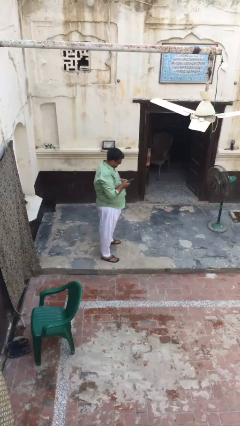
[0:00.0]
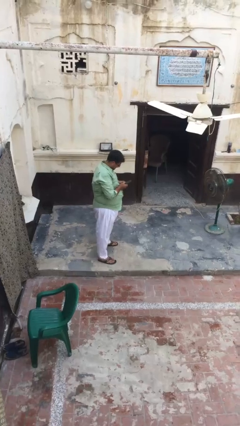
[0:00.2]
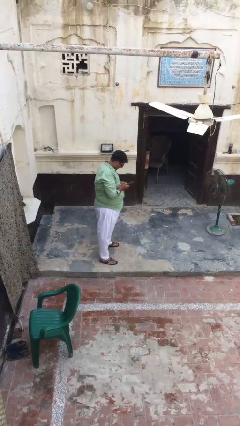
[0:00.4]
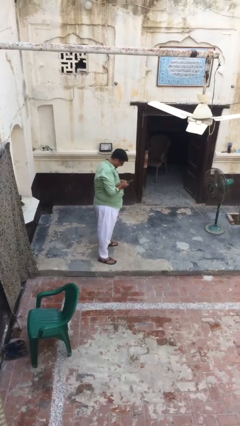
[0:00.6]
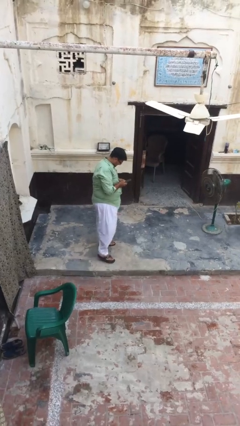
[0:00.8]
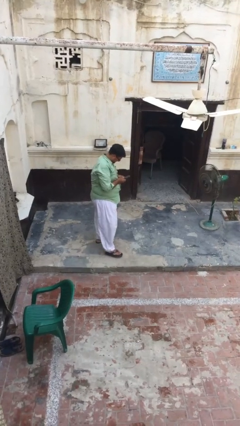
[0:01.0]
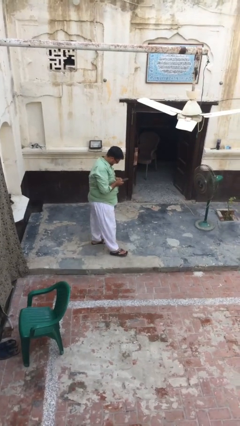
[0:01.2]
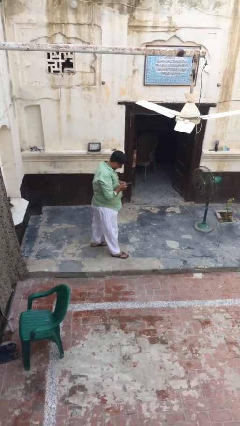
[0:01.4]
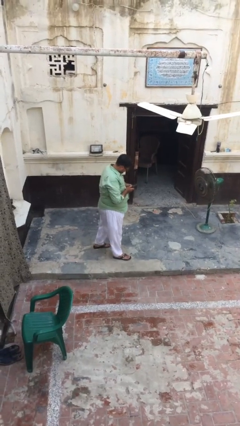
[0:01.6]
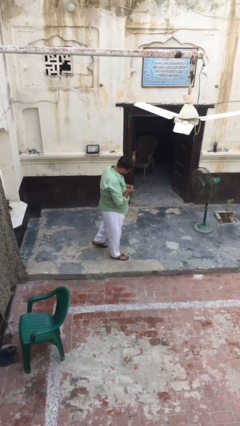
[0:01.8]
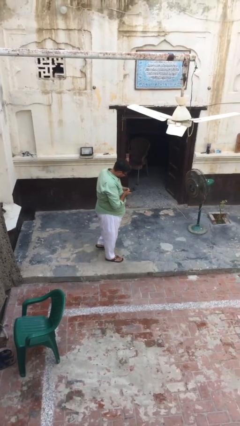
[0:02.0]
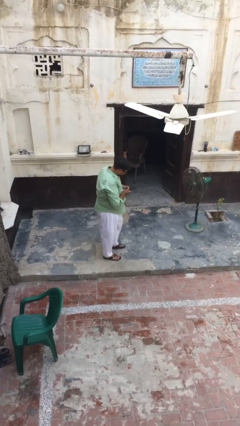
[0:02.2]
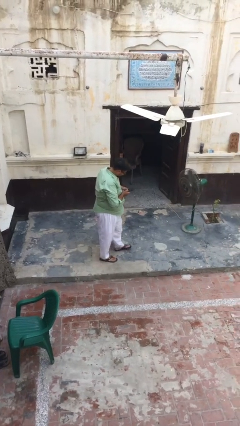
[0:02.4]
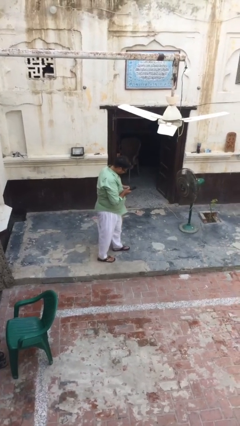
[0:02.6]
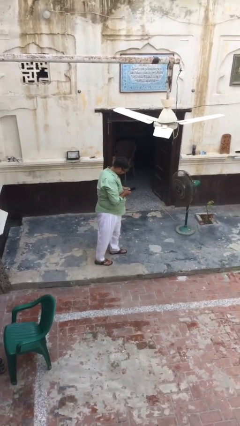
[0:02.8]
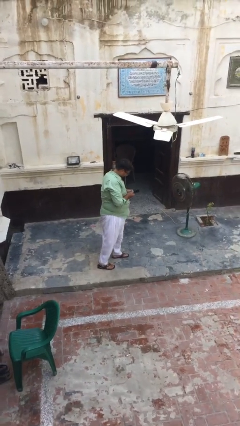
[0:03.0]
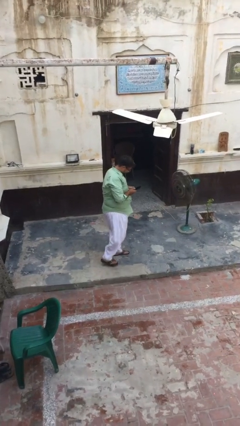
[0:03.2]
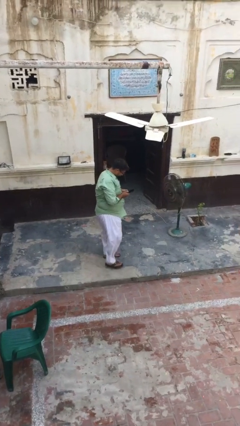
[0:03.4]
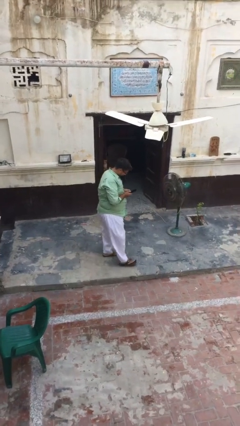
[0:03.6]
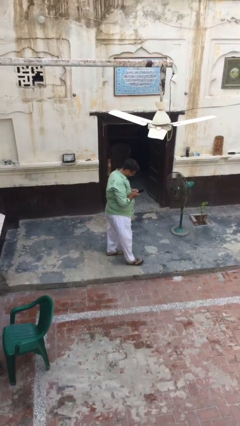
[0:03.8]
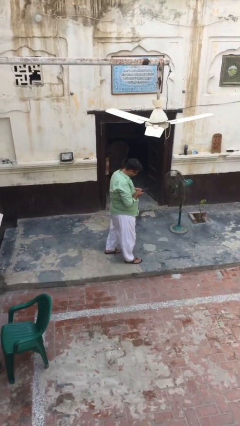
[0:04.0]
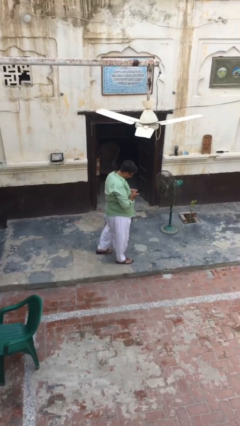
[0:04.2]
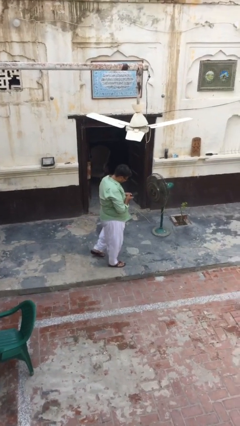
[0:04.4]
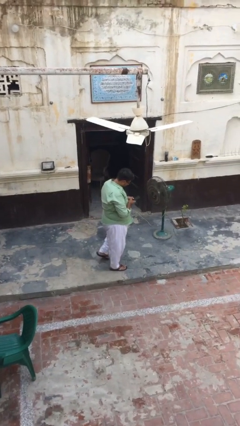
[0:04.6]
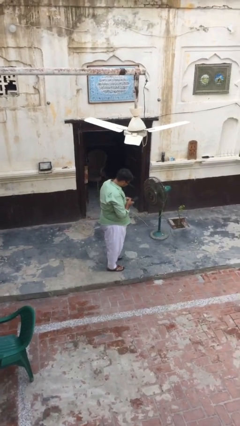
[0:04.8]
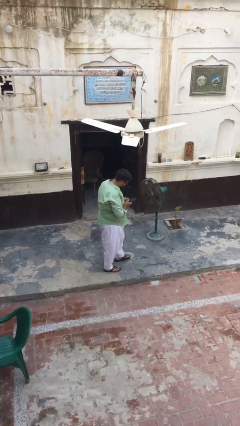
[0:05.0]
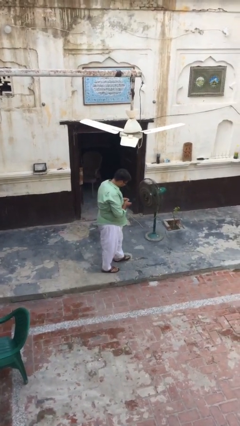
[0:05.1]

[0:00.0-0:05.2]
person texts on phone

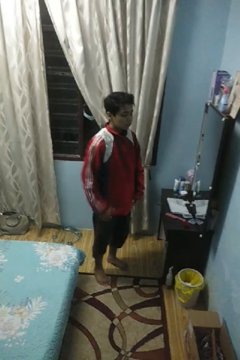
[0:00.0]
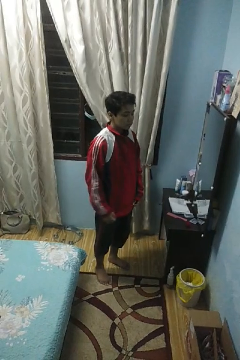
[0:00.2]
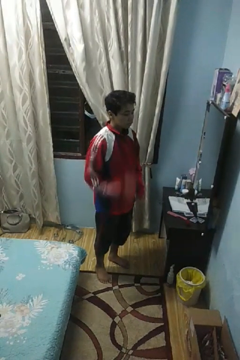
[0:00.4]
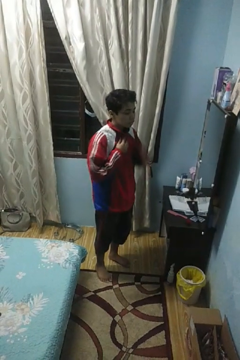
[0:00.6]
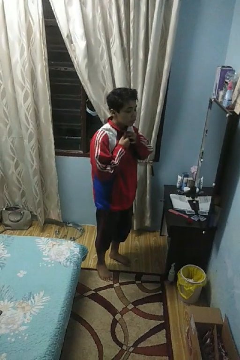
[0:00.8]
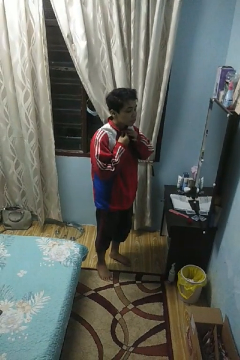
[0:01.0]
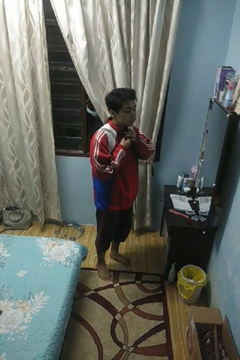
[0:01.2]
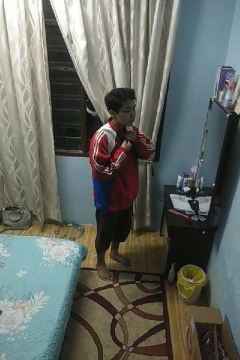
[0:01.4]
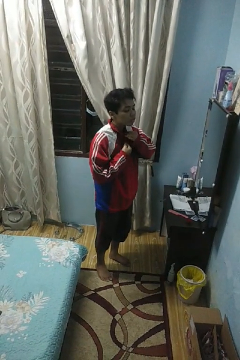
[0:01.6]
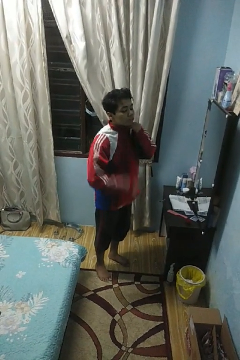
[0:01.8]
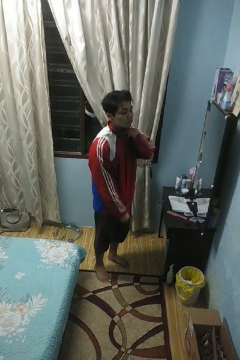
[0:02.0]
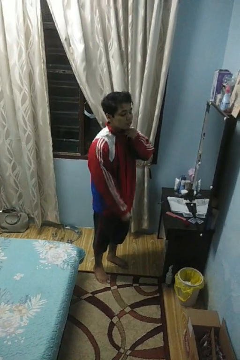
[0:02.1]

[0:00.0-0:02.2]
person unzips jacket

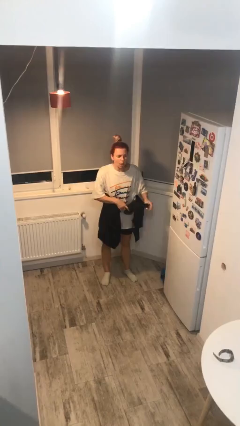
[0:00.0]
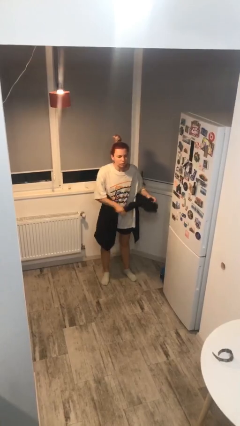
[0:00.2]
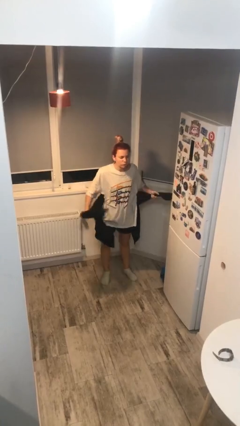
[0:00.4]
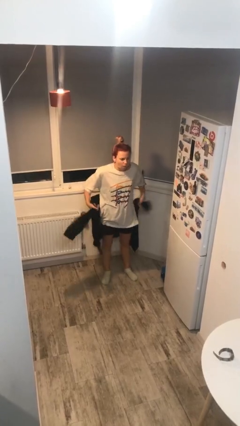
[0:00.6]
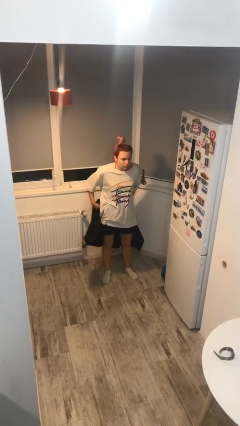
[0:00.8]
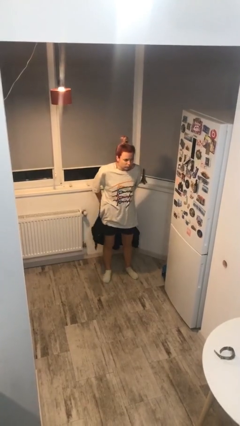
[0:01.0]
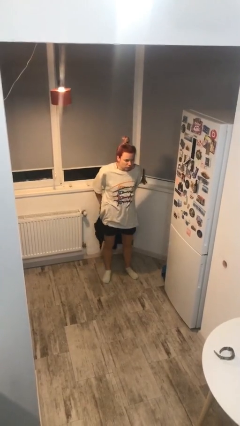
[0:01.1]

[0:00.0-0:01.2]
person unties jacket around waist

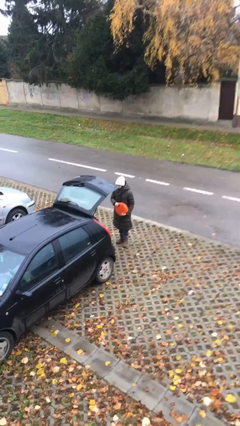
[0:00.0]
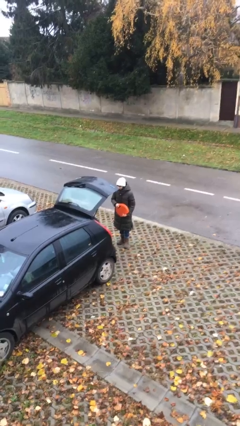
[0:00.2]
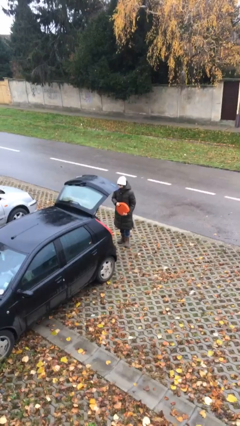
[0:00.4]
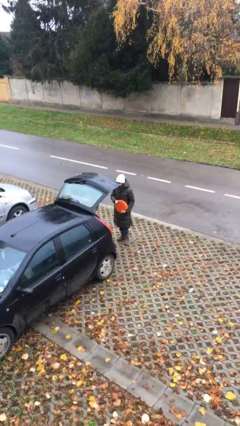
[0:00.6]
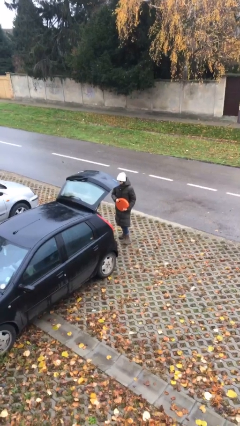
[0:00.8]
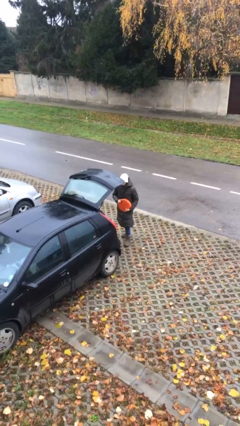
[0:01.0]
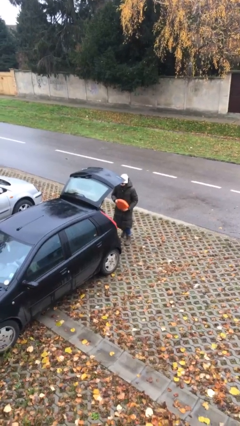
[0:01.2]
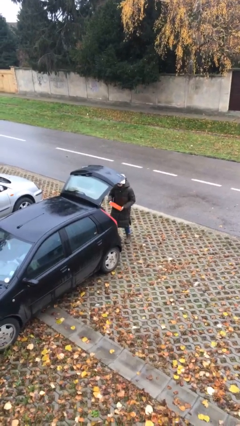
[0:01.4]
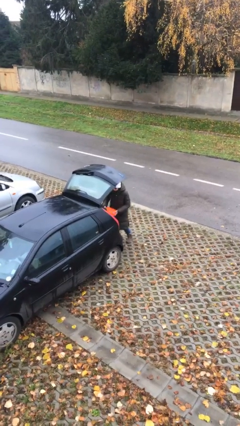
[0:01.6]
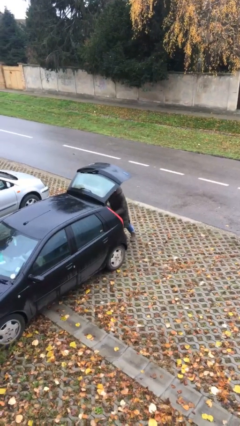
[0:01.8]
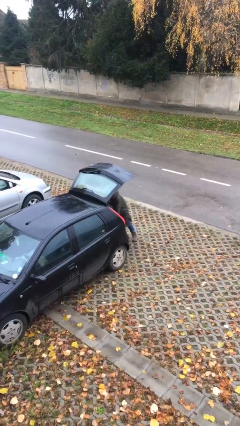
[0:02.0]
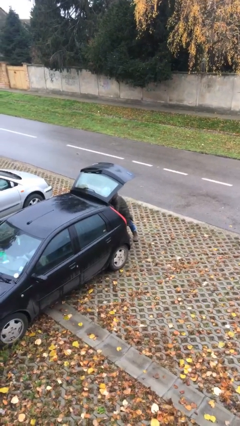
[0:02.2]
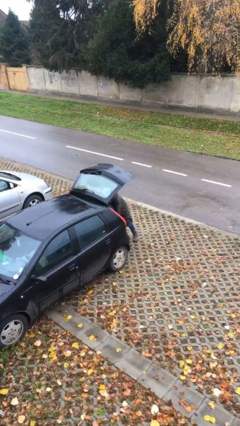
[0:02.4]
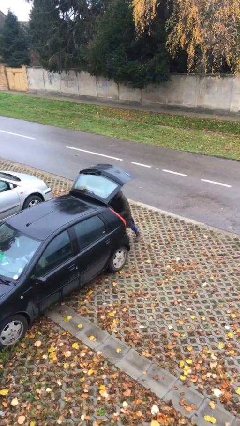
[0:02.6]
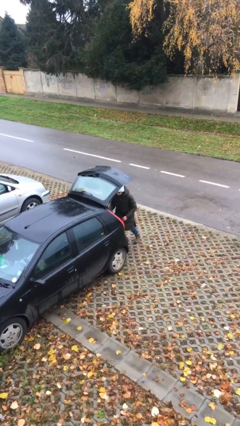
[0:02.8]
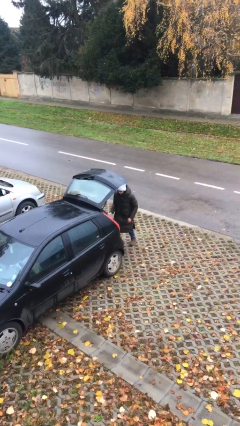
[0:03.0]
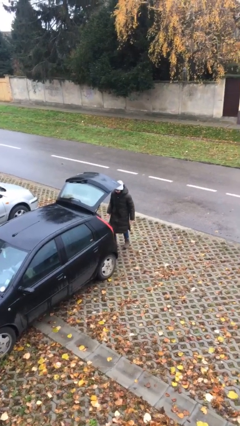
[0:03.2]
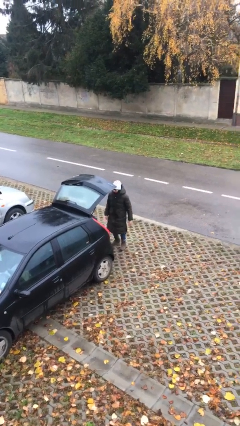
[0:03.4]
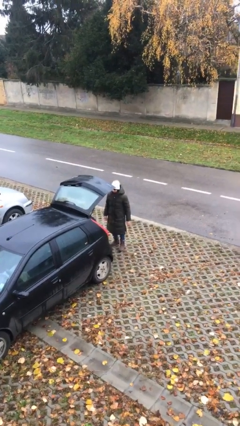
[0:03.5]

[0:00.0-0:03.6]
person loads car

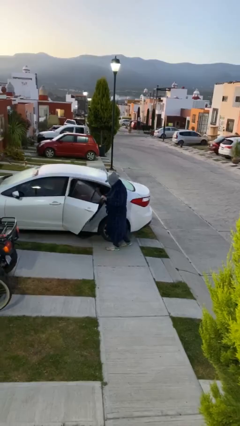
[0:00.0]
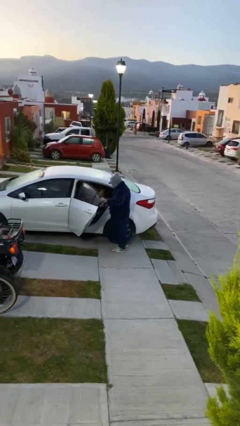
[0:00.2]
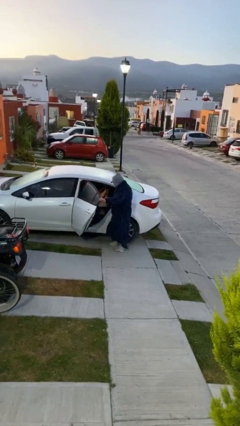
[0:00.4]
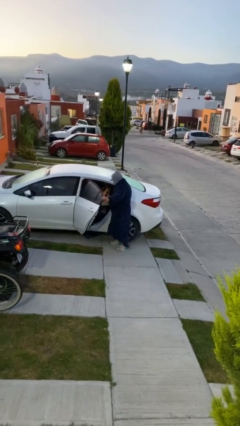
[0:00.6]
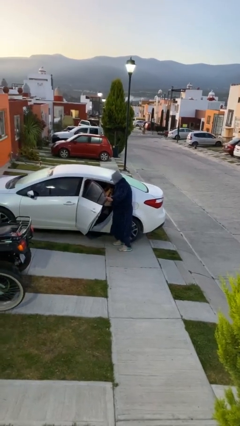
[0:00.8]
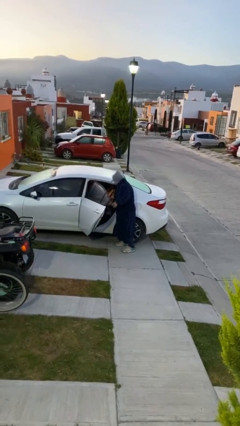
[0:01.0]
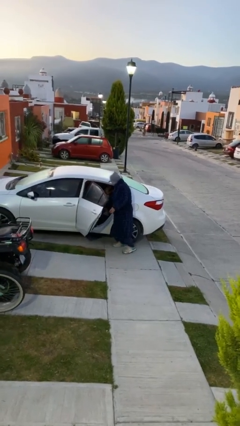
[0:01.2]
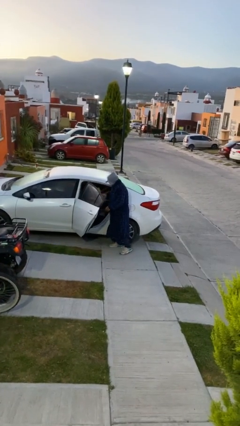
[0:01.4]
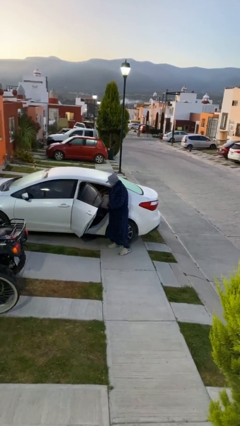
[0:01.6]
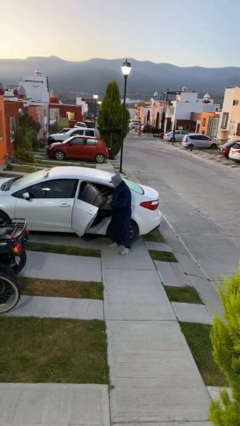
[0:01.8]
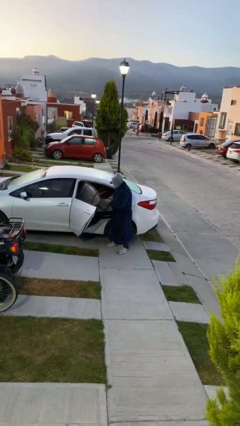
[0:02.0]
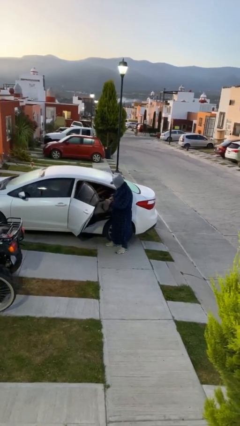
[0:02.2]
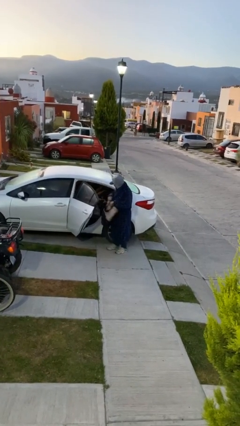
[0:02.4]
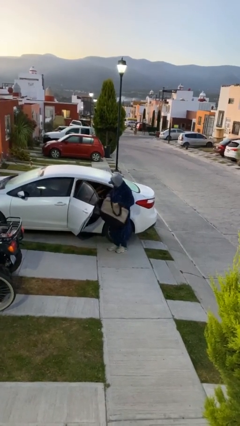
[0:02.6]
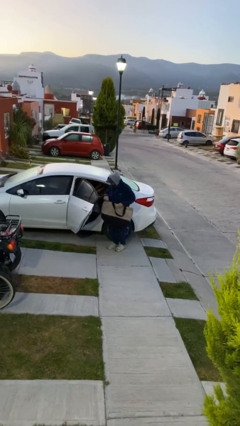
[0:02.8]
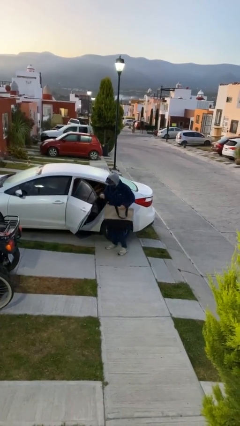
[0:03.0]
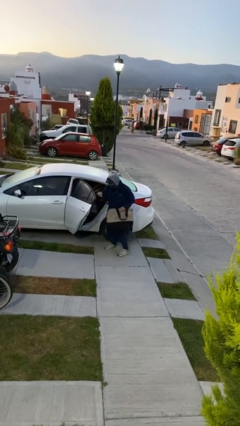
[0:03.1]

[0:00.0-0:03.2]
person unloads car

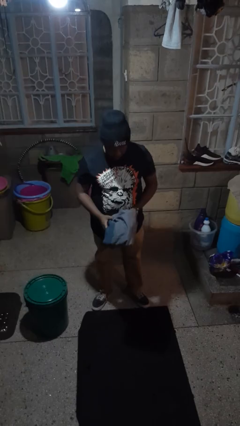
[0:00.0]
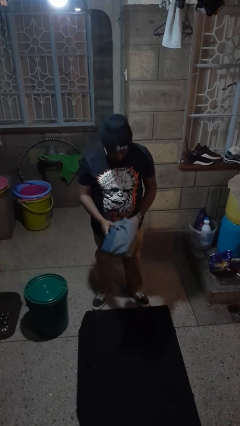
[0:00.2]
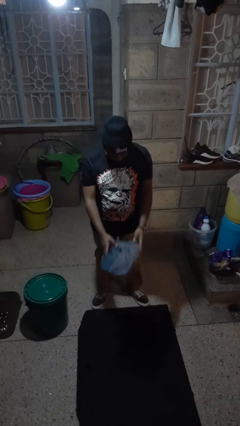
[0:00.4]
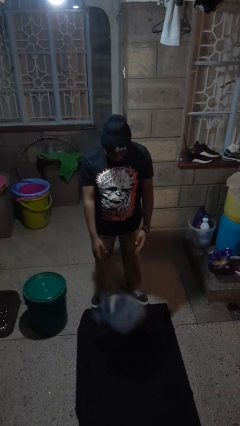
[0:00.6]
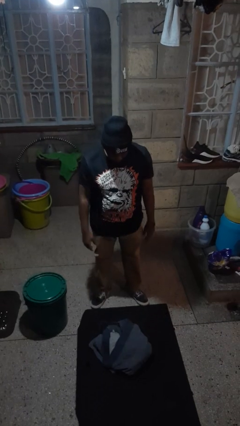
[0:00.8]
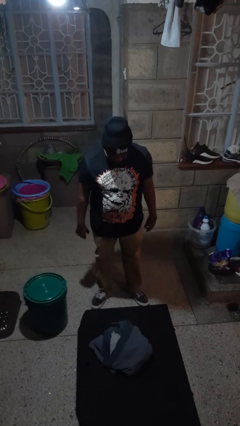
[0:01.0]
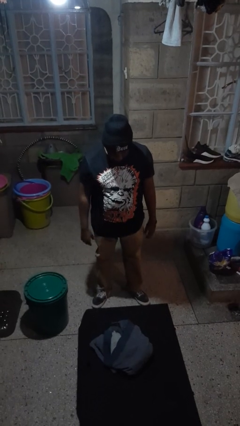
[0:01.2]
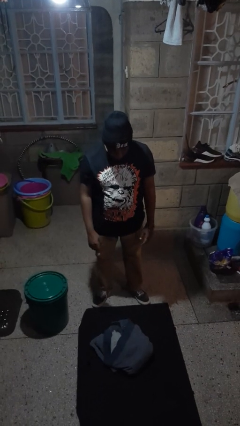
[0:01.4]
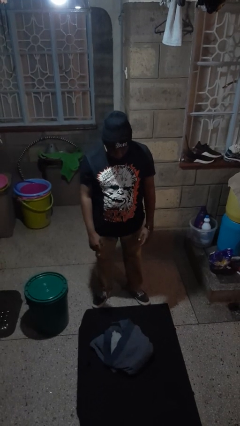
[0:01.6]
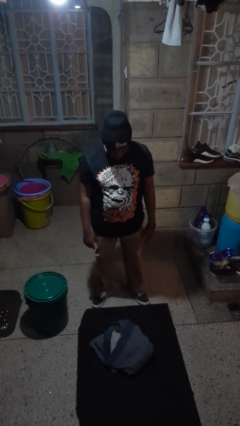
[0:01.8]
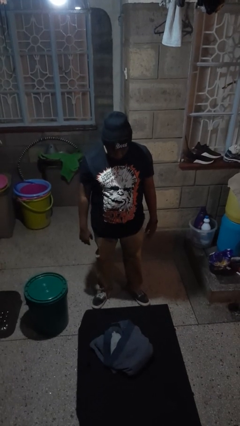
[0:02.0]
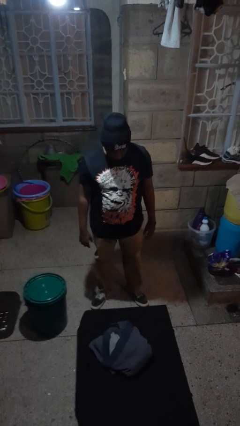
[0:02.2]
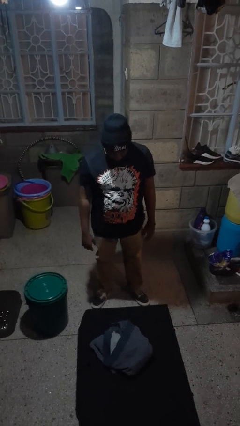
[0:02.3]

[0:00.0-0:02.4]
person drops object
